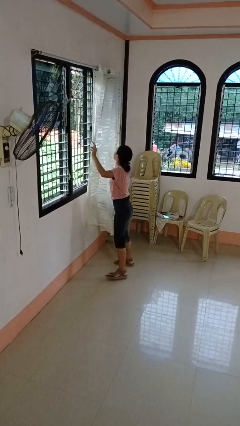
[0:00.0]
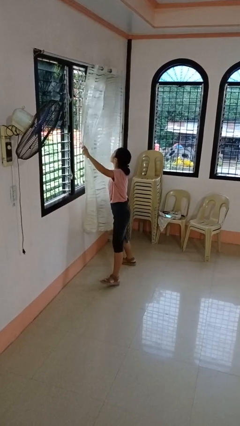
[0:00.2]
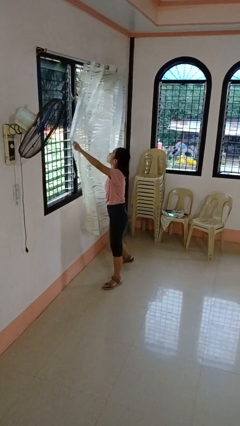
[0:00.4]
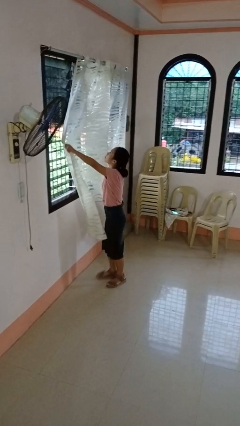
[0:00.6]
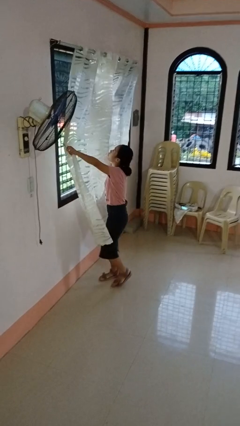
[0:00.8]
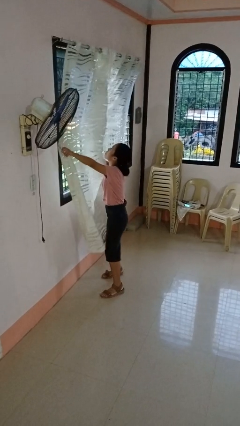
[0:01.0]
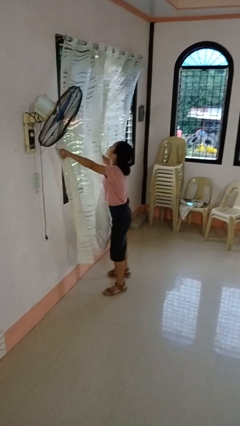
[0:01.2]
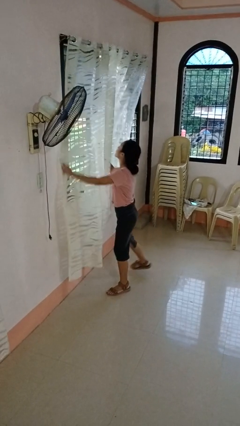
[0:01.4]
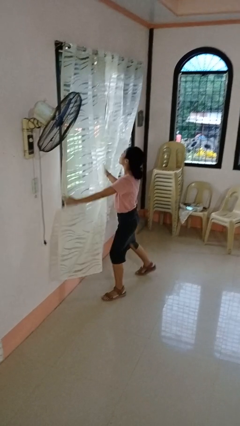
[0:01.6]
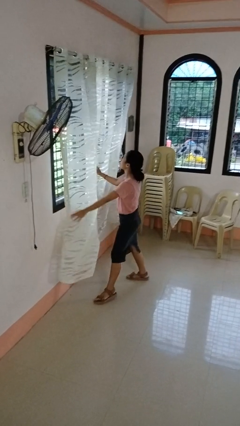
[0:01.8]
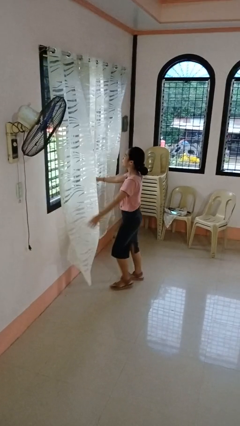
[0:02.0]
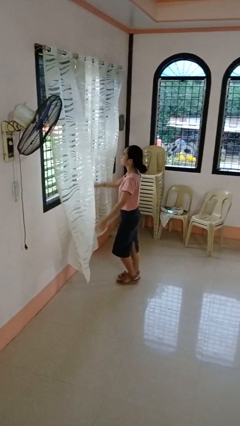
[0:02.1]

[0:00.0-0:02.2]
person closes curtains

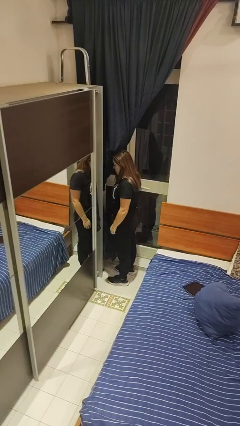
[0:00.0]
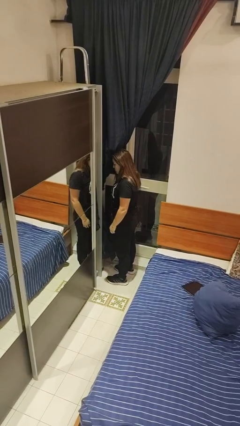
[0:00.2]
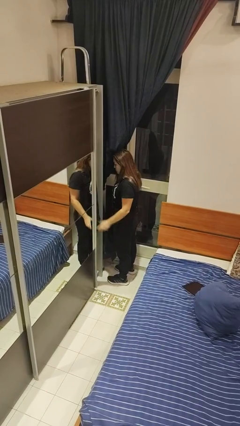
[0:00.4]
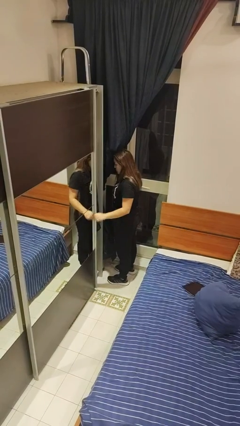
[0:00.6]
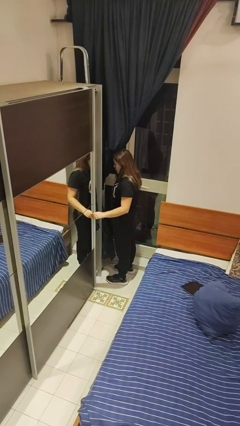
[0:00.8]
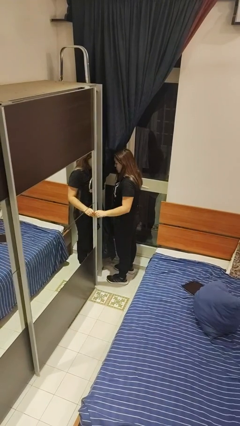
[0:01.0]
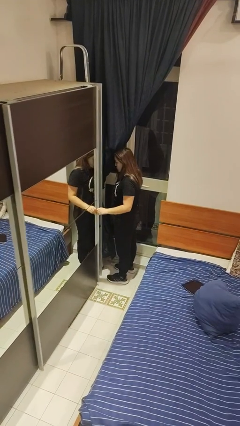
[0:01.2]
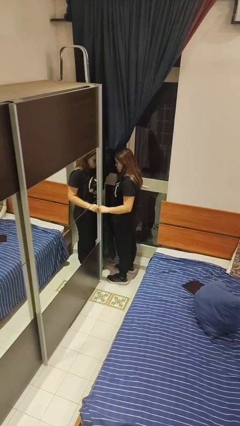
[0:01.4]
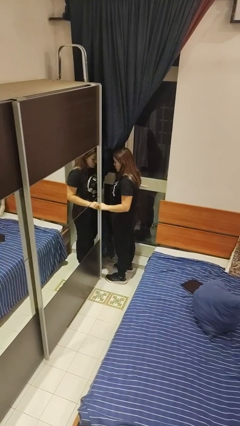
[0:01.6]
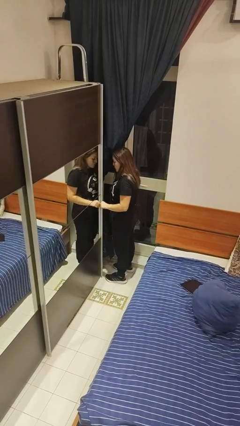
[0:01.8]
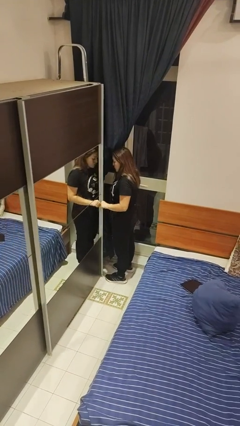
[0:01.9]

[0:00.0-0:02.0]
person closes closet door

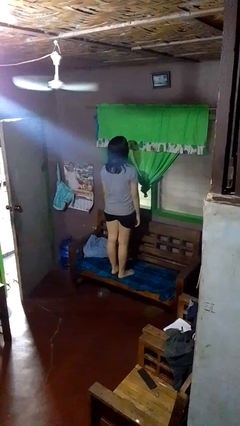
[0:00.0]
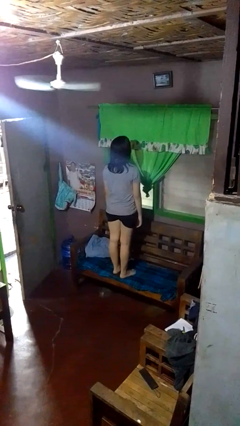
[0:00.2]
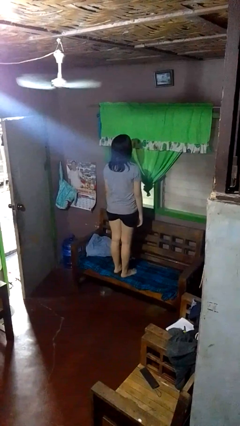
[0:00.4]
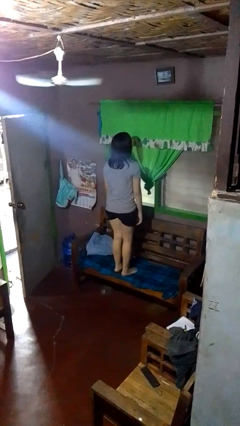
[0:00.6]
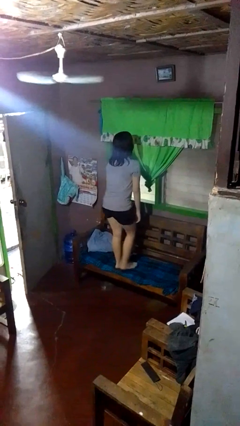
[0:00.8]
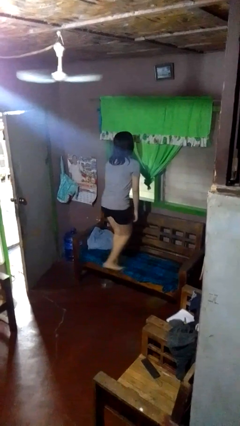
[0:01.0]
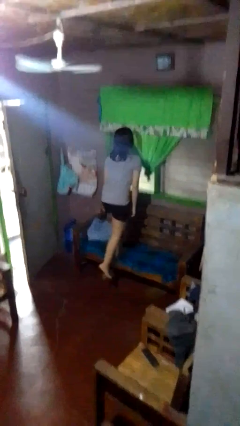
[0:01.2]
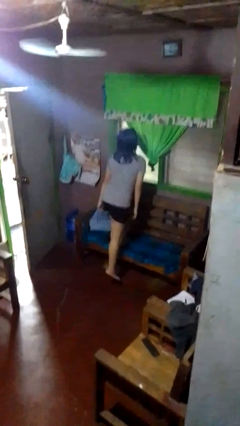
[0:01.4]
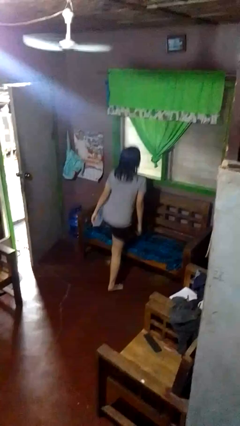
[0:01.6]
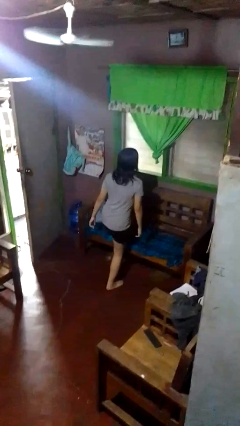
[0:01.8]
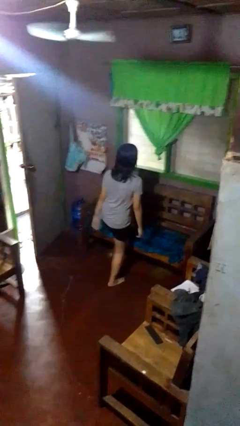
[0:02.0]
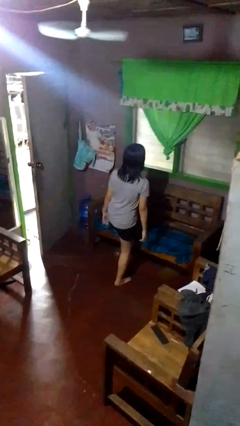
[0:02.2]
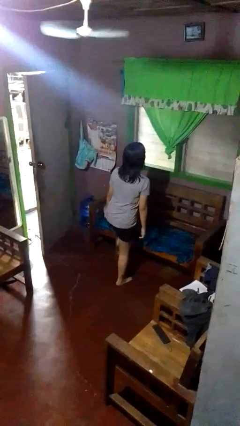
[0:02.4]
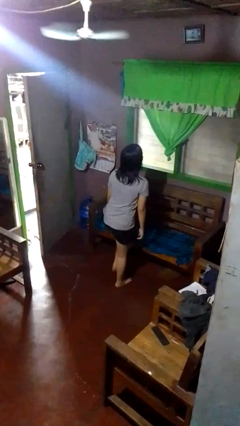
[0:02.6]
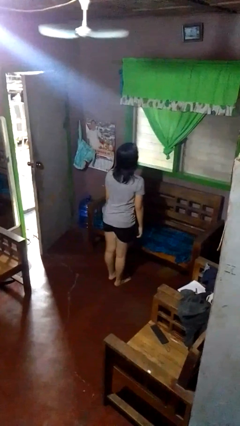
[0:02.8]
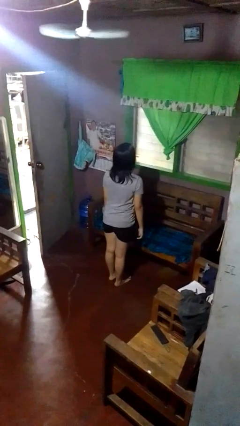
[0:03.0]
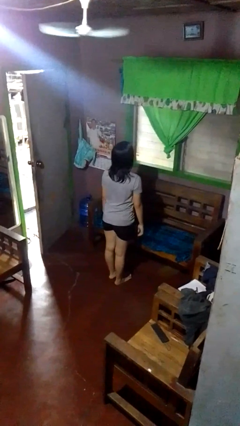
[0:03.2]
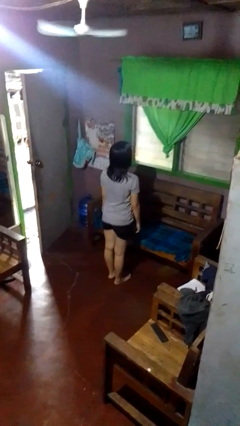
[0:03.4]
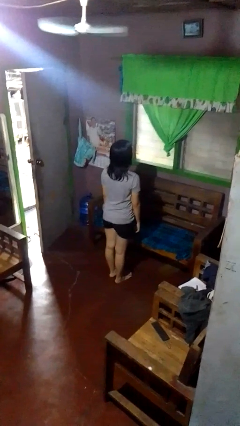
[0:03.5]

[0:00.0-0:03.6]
person climbs off couch

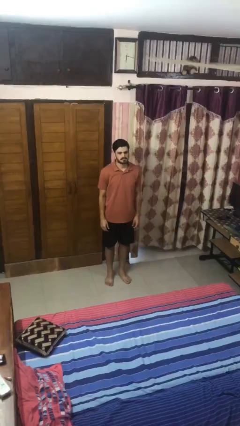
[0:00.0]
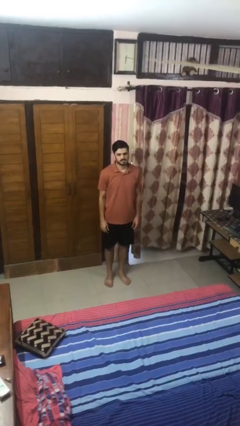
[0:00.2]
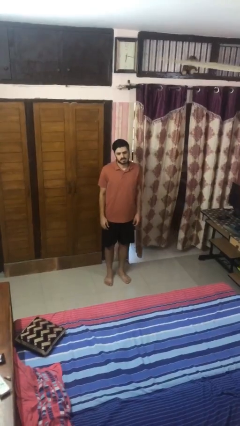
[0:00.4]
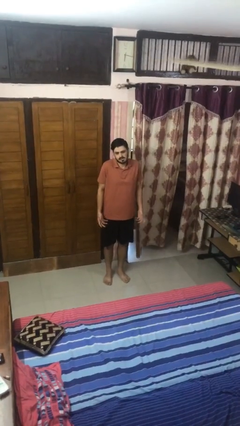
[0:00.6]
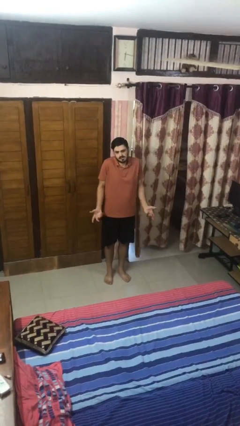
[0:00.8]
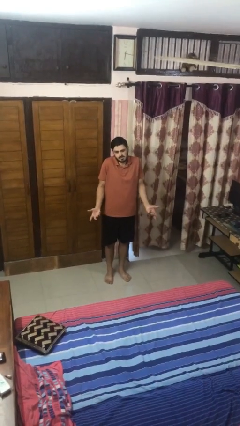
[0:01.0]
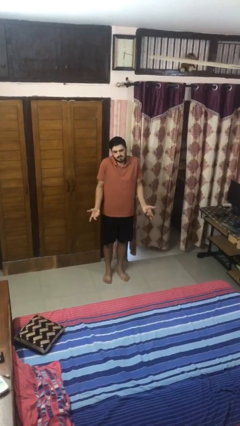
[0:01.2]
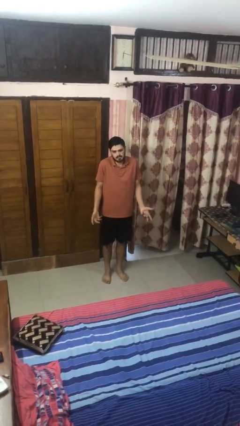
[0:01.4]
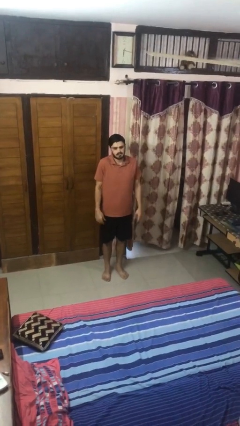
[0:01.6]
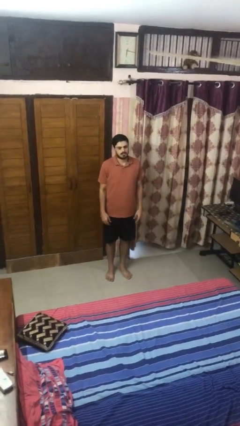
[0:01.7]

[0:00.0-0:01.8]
person shrugs

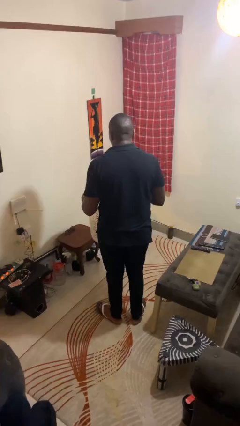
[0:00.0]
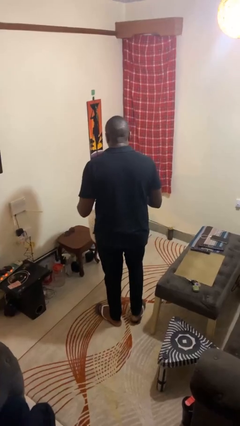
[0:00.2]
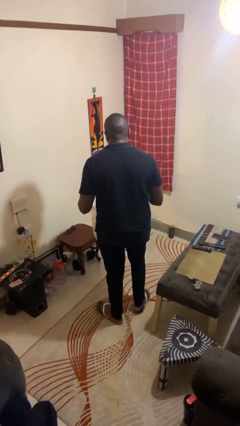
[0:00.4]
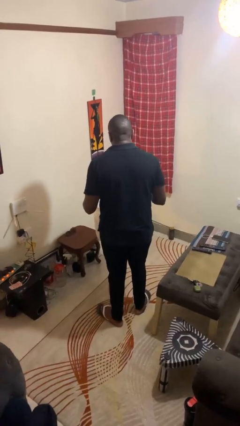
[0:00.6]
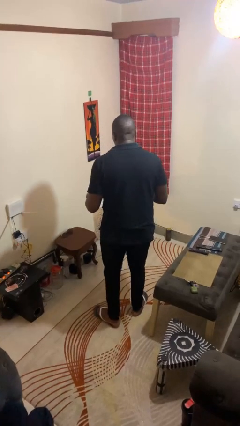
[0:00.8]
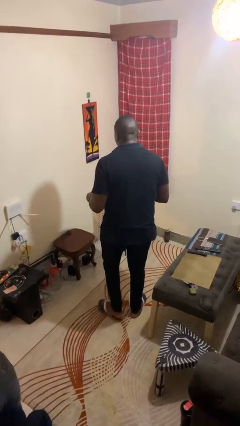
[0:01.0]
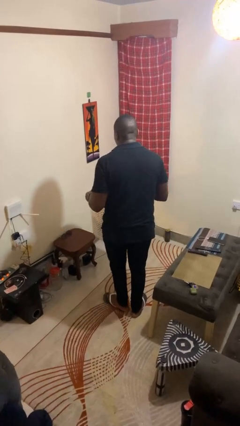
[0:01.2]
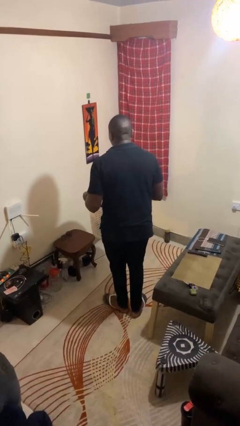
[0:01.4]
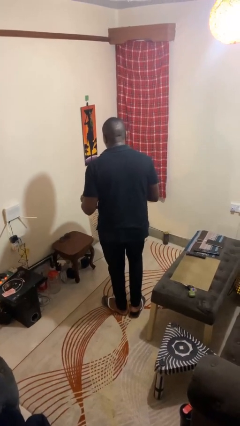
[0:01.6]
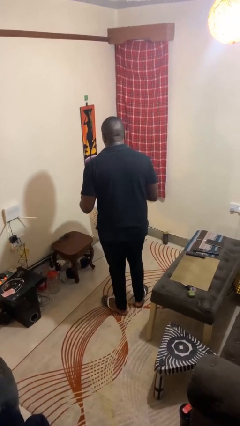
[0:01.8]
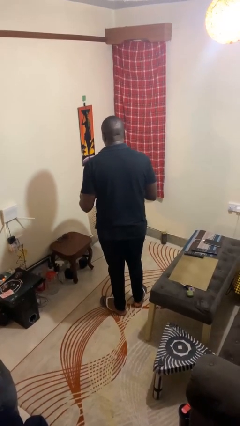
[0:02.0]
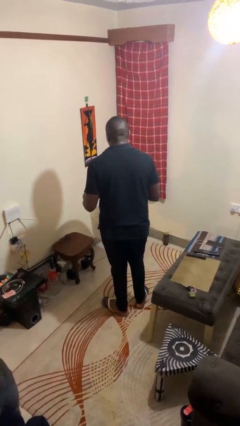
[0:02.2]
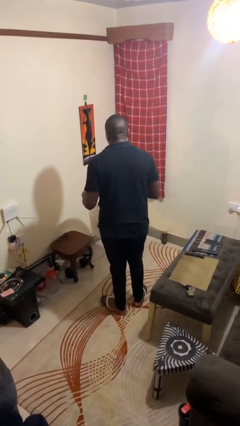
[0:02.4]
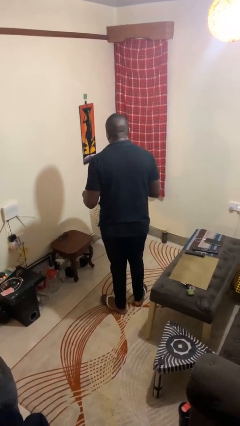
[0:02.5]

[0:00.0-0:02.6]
person carries laundry basket

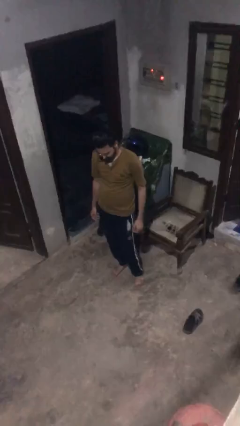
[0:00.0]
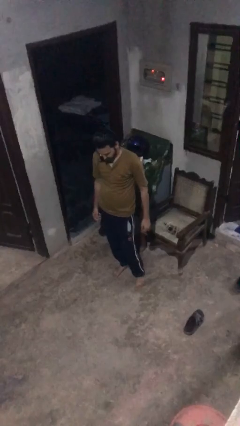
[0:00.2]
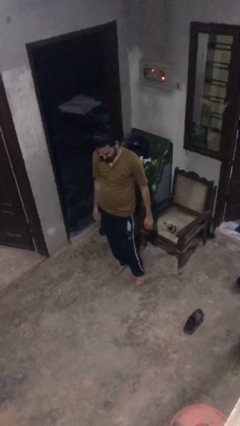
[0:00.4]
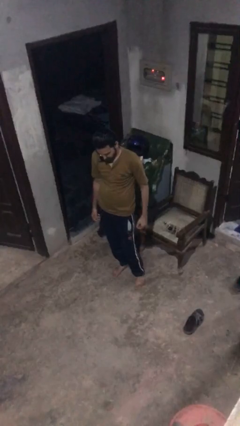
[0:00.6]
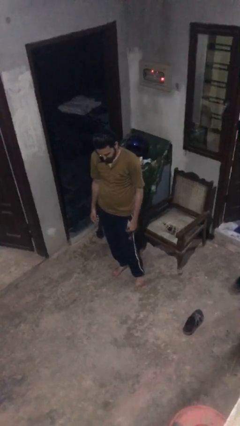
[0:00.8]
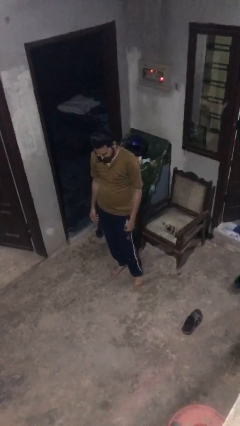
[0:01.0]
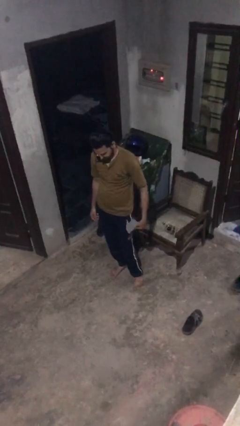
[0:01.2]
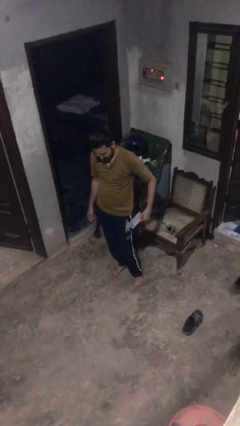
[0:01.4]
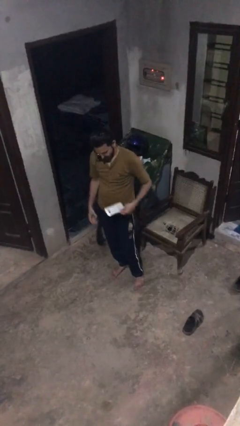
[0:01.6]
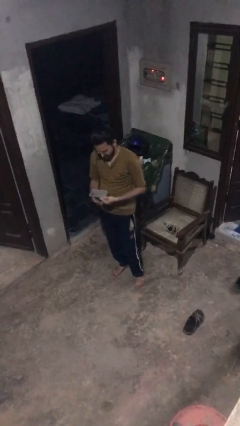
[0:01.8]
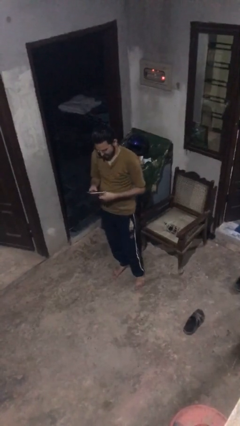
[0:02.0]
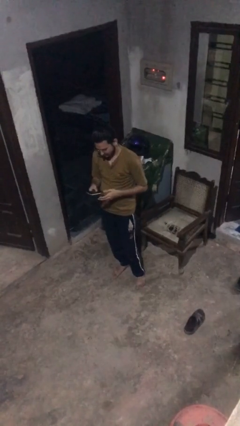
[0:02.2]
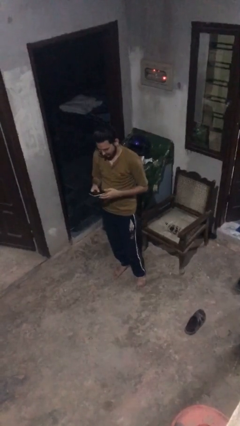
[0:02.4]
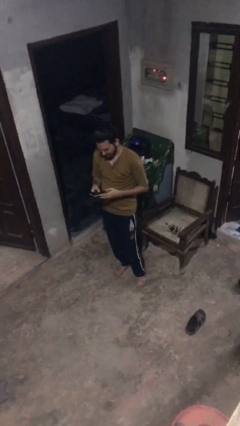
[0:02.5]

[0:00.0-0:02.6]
person takes phone from pocket

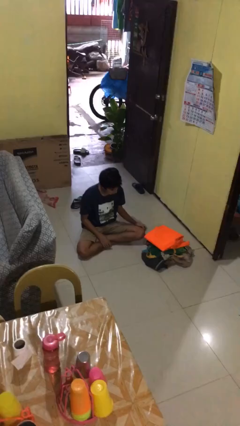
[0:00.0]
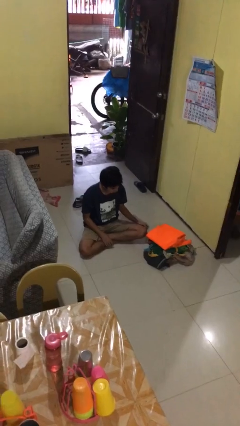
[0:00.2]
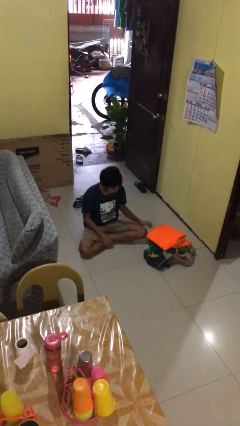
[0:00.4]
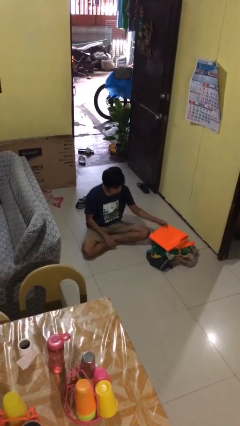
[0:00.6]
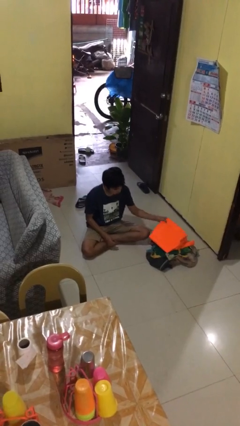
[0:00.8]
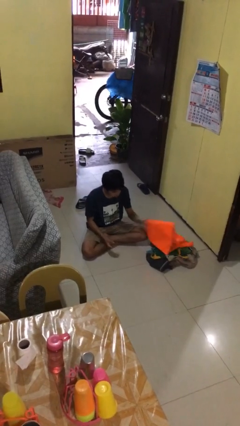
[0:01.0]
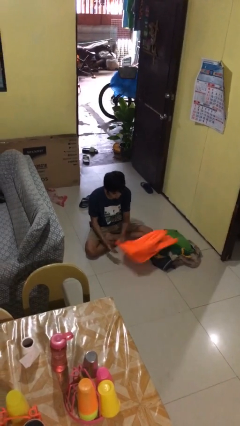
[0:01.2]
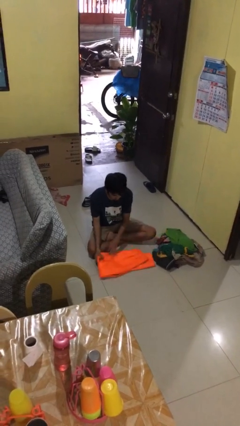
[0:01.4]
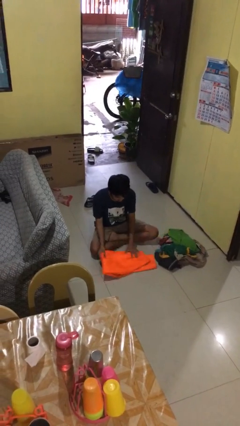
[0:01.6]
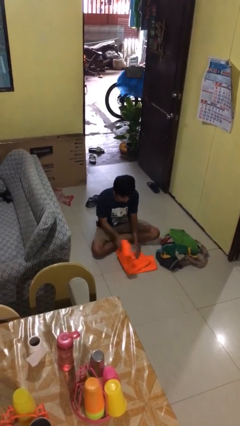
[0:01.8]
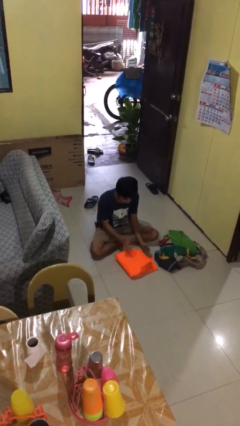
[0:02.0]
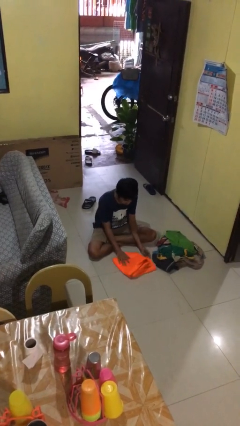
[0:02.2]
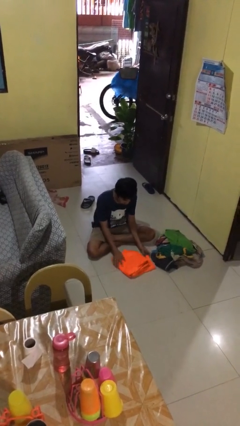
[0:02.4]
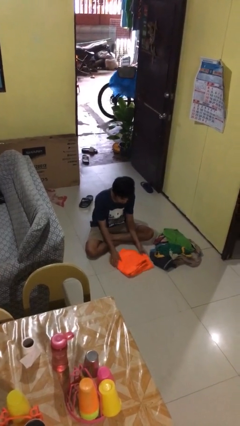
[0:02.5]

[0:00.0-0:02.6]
person folds pants
